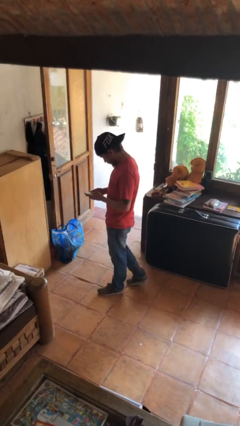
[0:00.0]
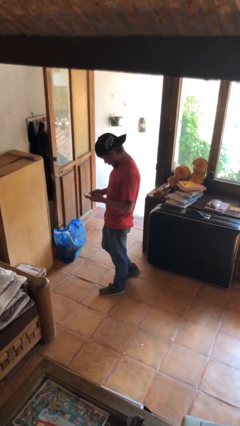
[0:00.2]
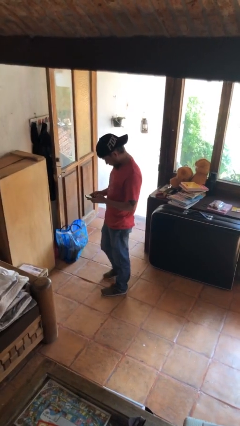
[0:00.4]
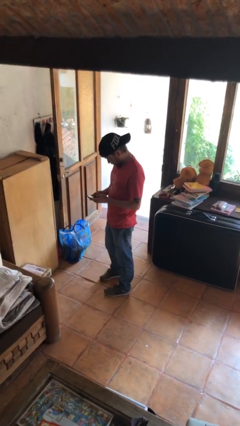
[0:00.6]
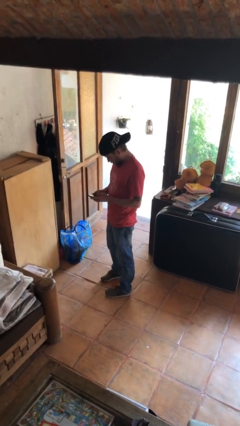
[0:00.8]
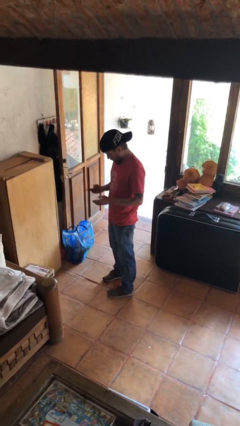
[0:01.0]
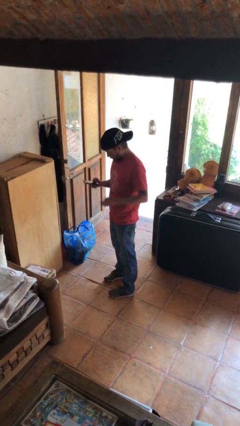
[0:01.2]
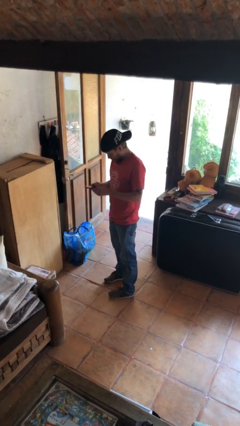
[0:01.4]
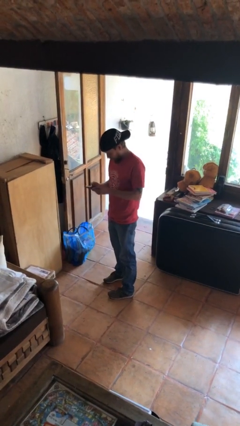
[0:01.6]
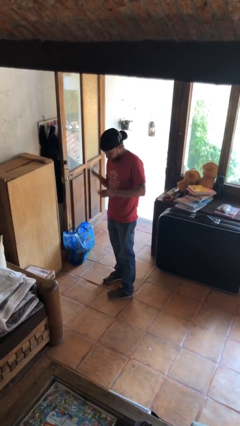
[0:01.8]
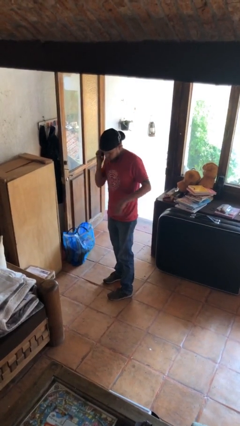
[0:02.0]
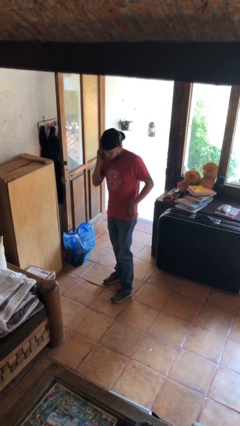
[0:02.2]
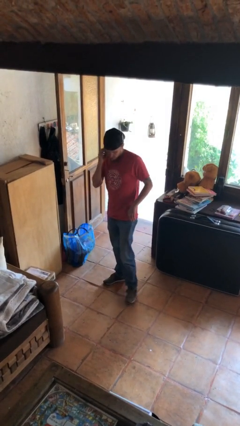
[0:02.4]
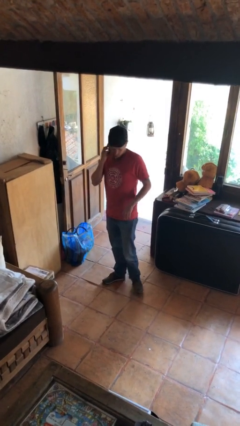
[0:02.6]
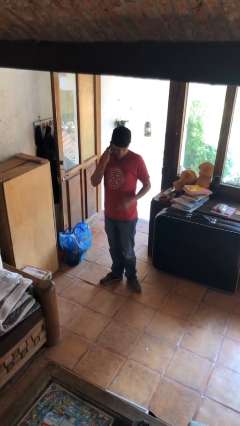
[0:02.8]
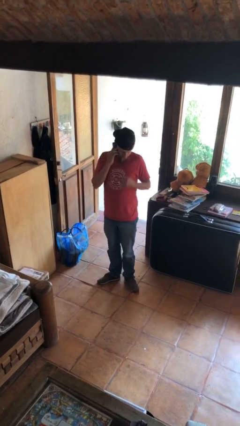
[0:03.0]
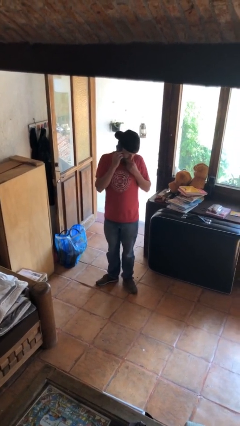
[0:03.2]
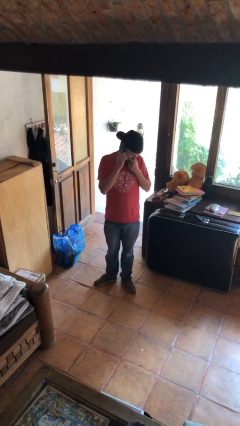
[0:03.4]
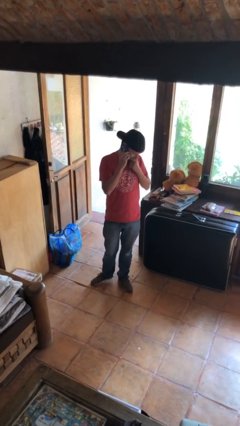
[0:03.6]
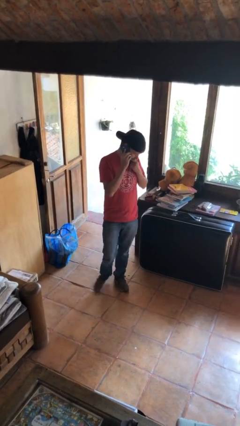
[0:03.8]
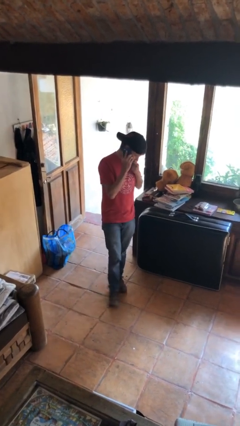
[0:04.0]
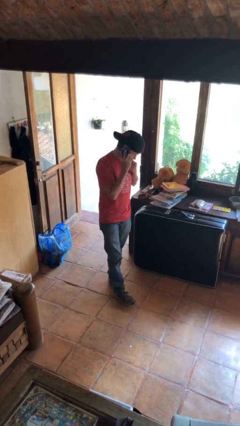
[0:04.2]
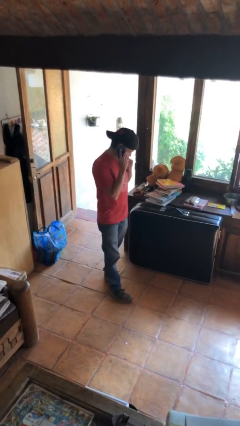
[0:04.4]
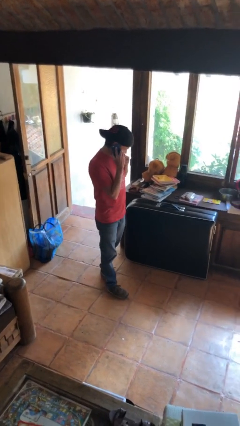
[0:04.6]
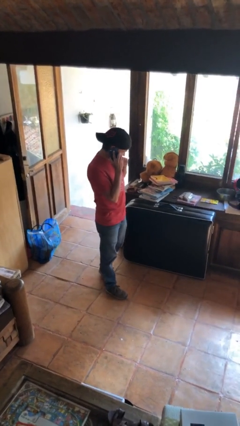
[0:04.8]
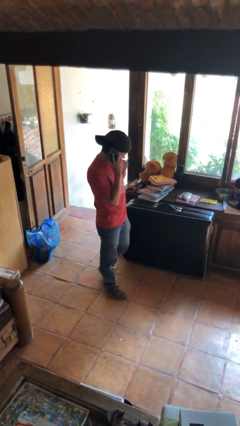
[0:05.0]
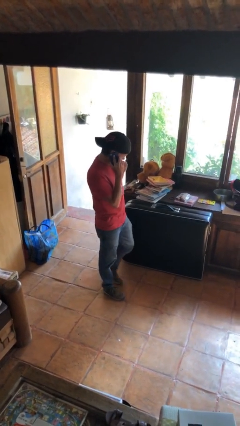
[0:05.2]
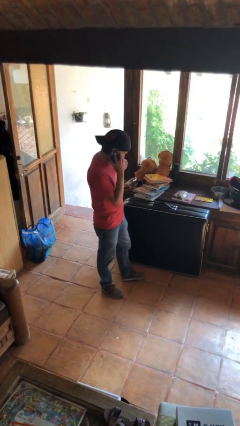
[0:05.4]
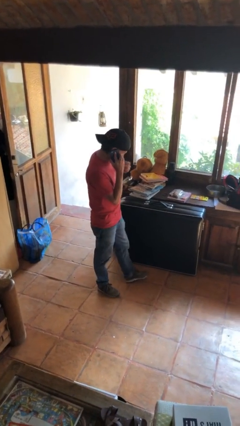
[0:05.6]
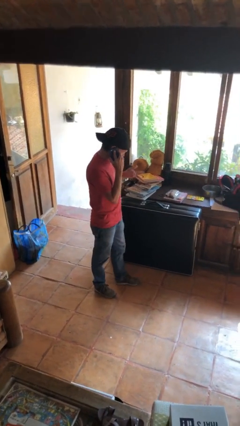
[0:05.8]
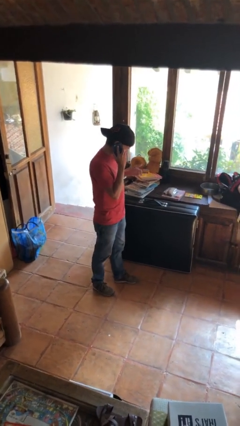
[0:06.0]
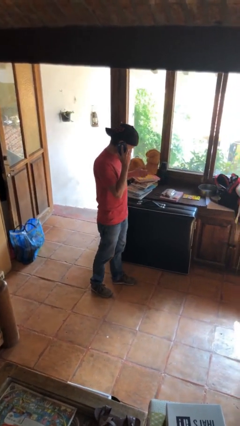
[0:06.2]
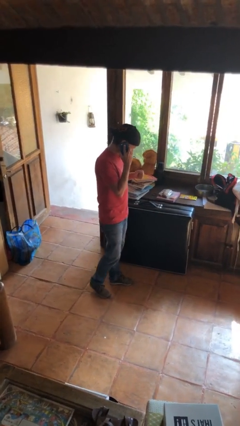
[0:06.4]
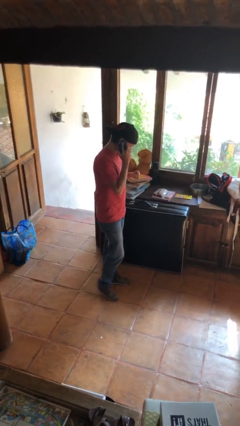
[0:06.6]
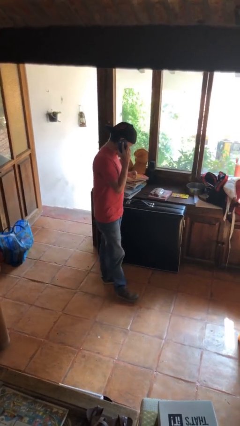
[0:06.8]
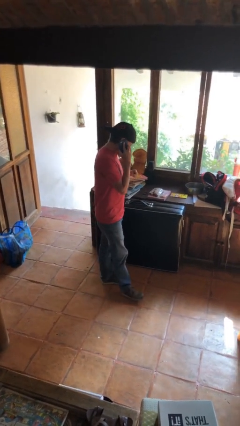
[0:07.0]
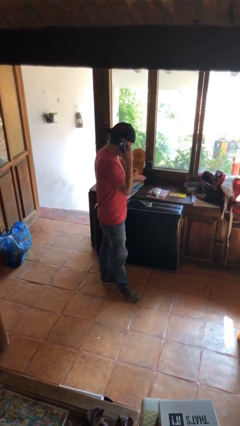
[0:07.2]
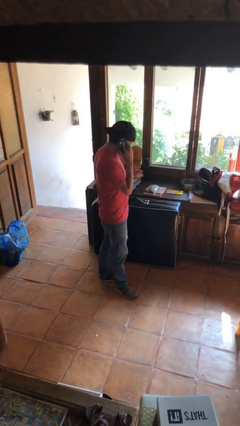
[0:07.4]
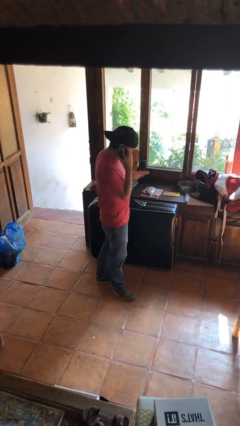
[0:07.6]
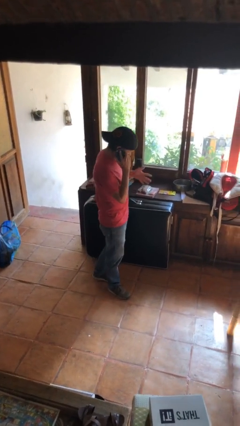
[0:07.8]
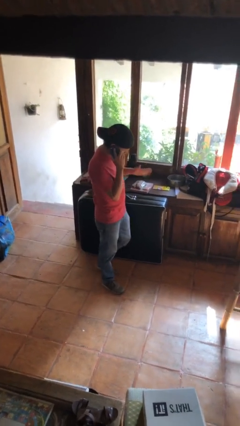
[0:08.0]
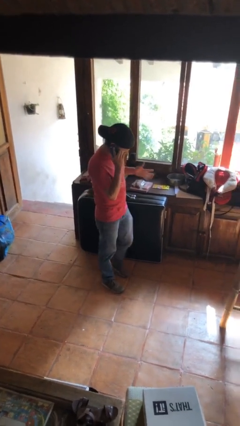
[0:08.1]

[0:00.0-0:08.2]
person talks on phone

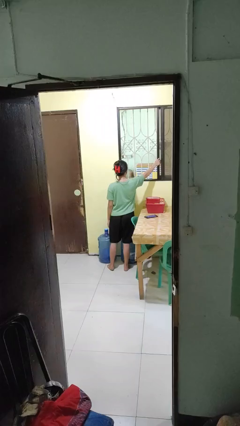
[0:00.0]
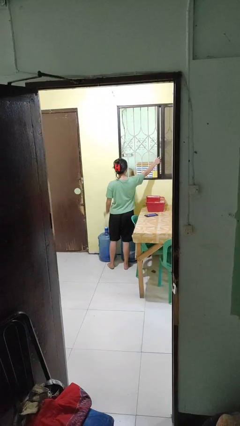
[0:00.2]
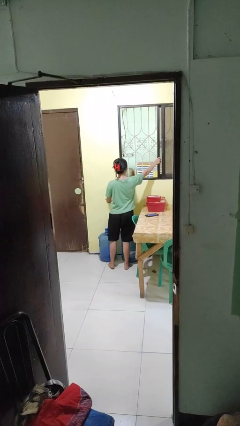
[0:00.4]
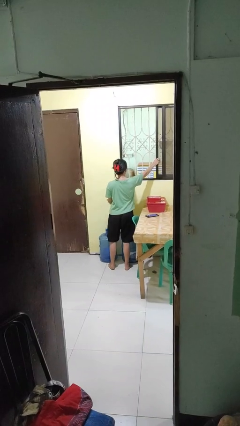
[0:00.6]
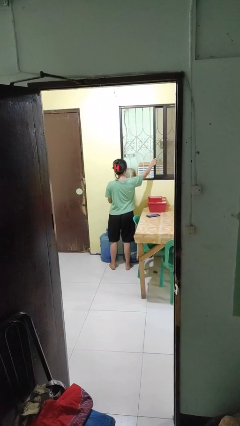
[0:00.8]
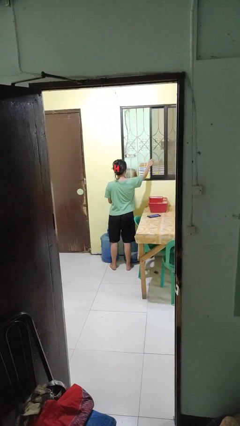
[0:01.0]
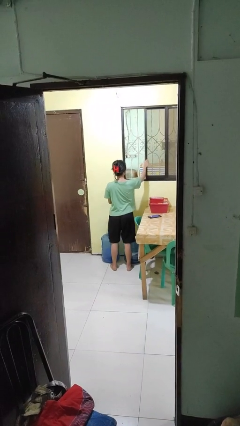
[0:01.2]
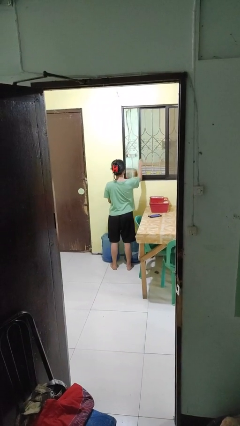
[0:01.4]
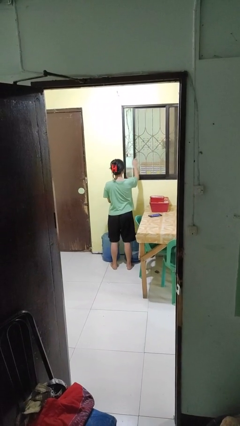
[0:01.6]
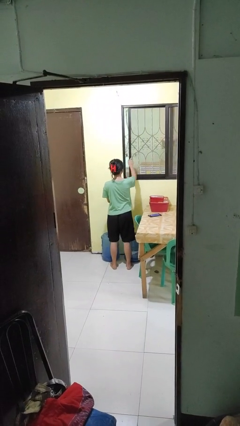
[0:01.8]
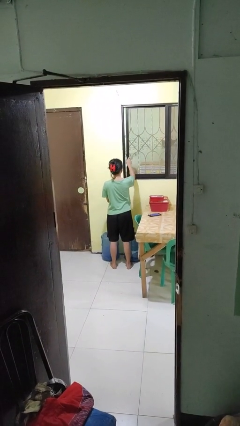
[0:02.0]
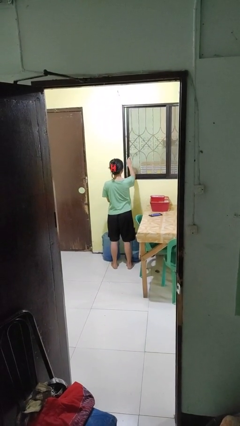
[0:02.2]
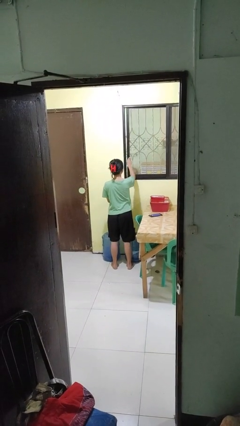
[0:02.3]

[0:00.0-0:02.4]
person closes home window

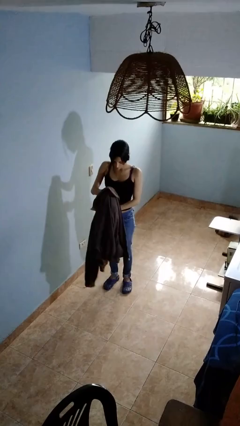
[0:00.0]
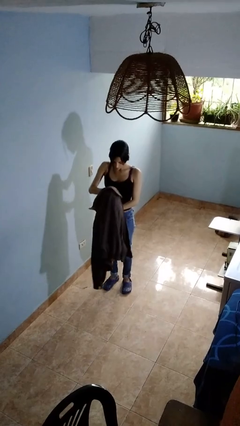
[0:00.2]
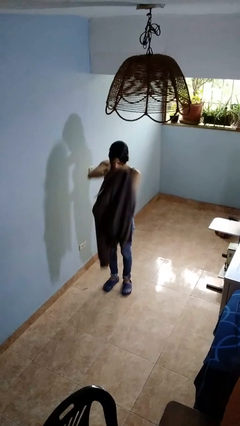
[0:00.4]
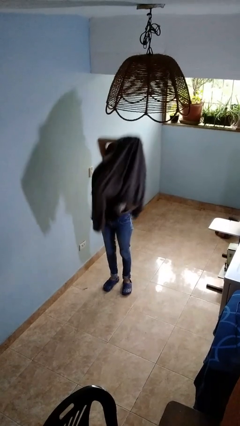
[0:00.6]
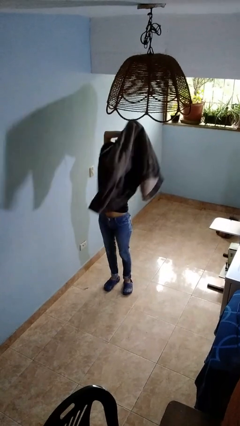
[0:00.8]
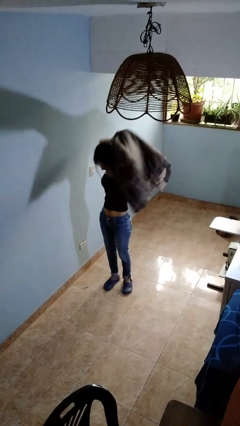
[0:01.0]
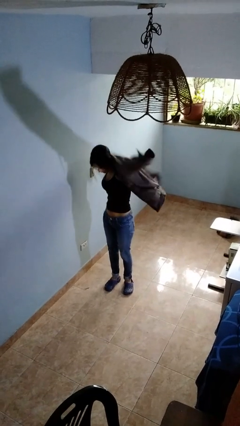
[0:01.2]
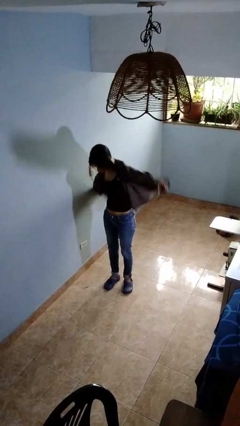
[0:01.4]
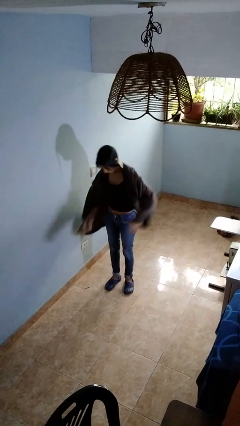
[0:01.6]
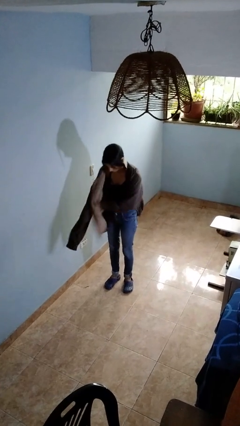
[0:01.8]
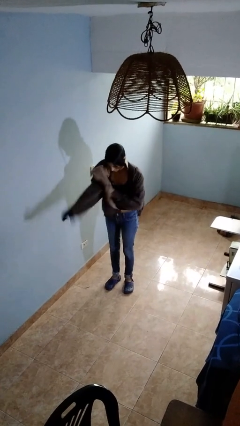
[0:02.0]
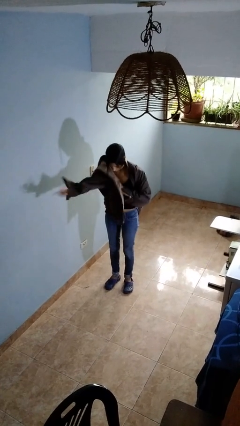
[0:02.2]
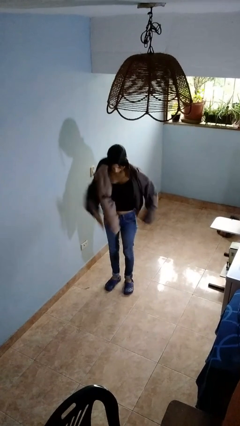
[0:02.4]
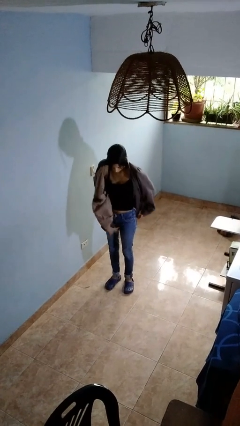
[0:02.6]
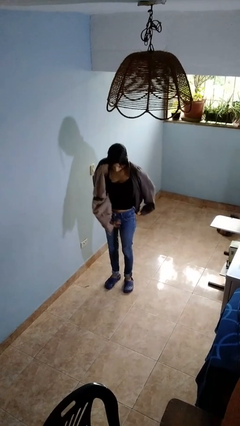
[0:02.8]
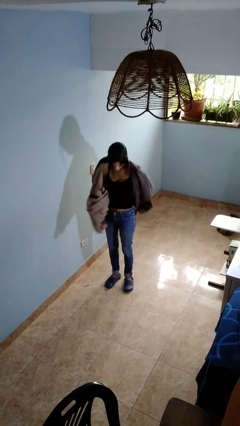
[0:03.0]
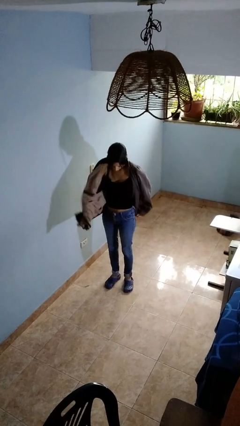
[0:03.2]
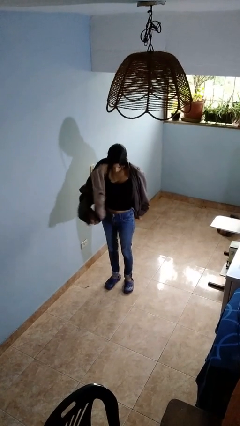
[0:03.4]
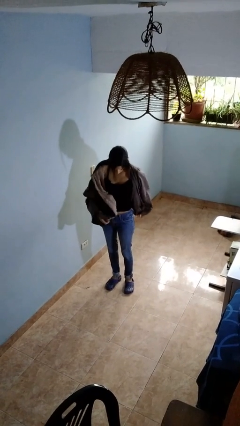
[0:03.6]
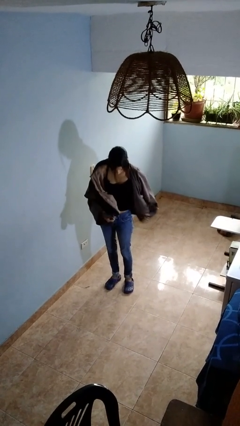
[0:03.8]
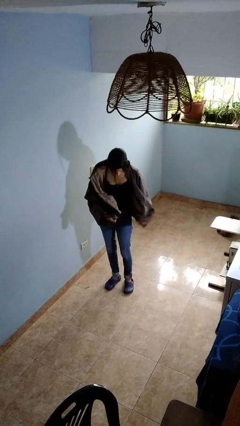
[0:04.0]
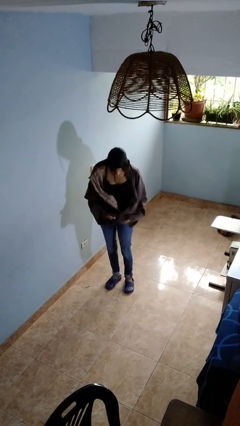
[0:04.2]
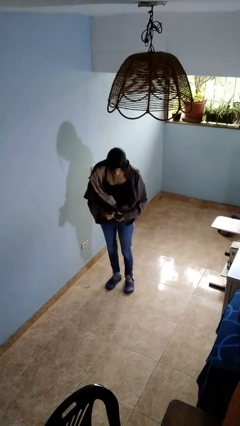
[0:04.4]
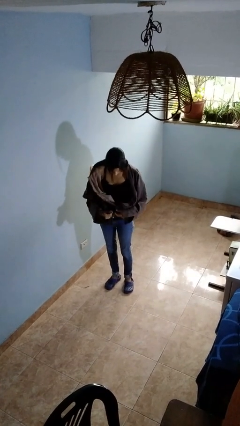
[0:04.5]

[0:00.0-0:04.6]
person puts on jacket

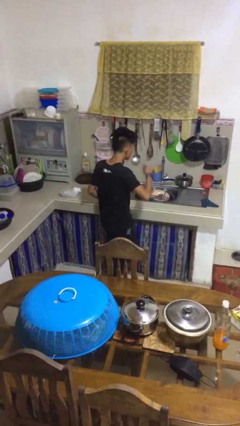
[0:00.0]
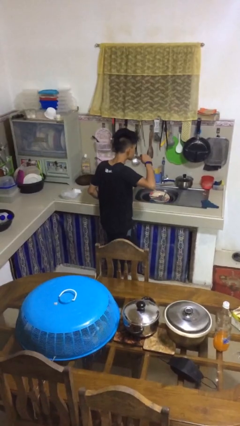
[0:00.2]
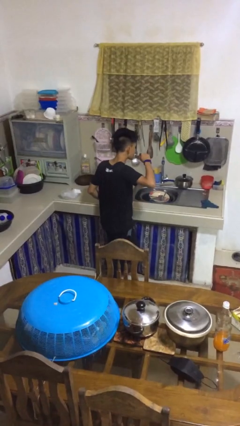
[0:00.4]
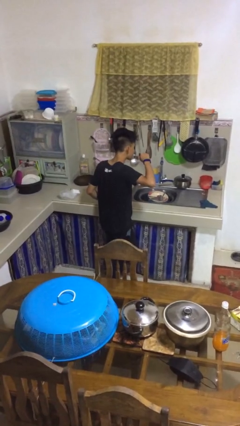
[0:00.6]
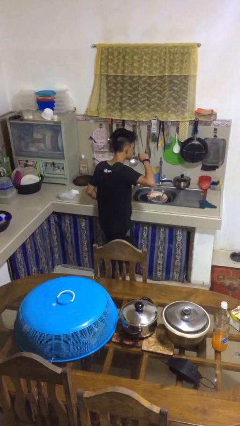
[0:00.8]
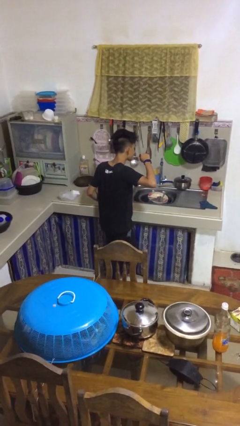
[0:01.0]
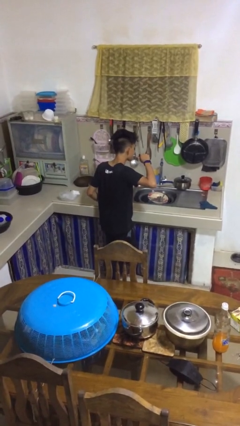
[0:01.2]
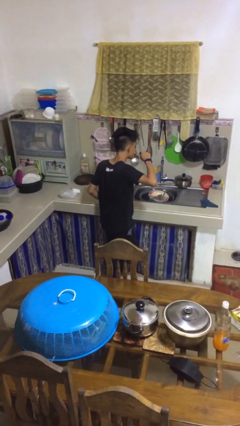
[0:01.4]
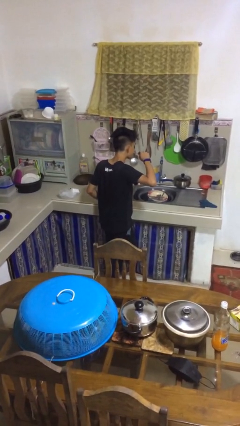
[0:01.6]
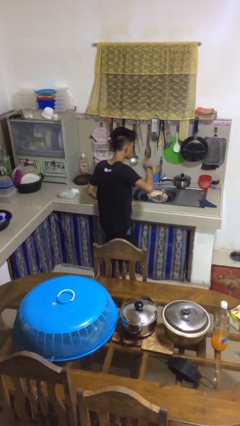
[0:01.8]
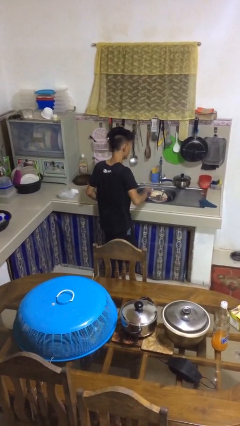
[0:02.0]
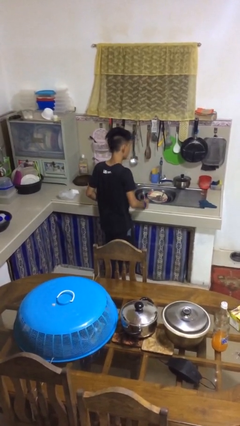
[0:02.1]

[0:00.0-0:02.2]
person brushes teeth

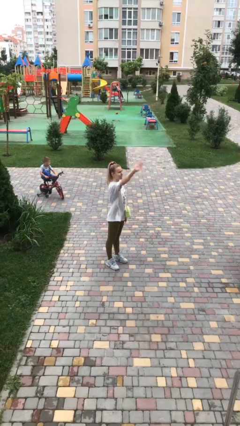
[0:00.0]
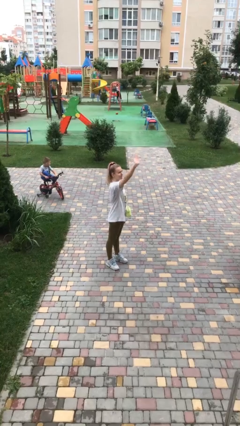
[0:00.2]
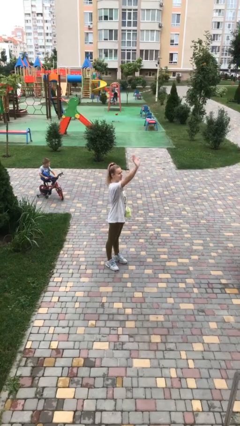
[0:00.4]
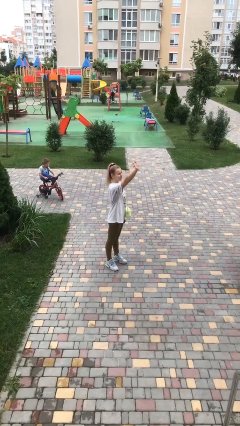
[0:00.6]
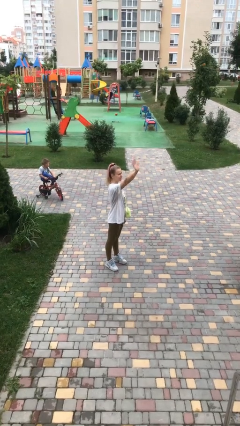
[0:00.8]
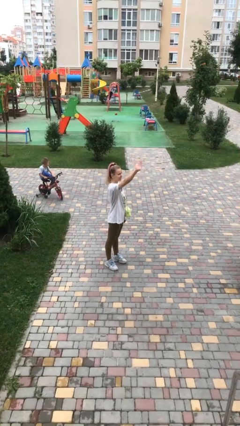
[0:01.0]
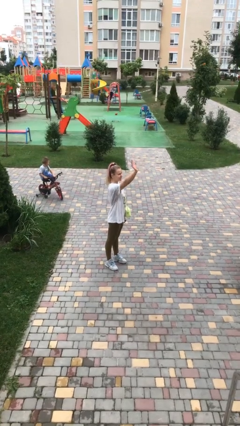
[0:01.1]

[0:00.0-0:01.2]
person waves at person
